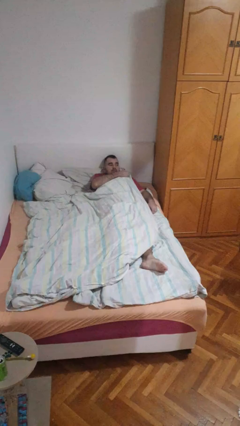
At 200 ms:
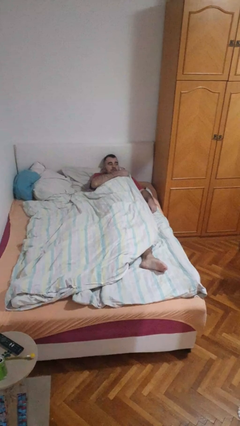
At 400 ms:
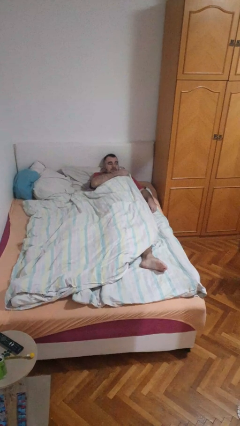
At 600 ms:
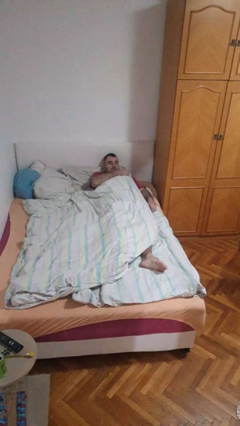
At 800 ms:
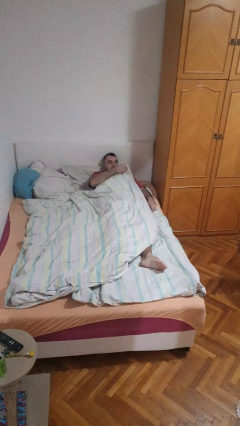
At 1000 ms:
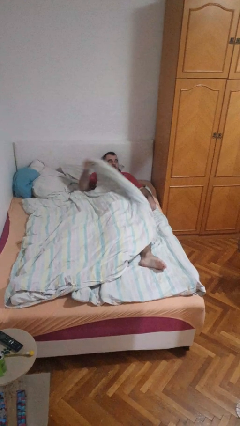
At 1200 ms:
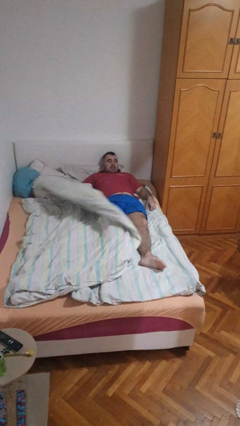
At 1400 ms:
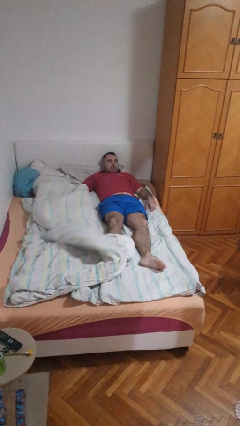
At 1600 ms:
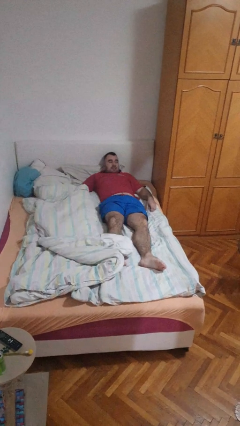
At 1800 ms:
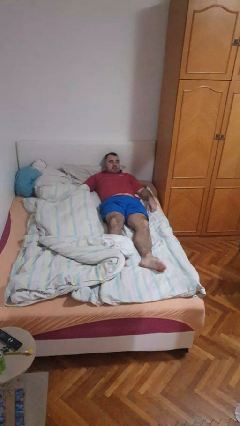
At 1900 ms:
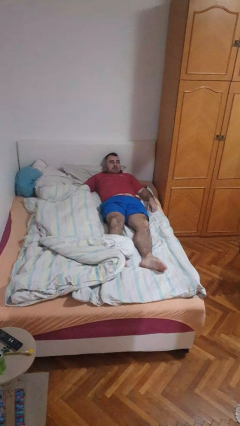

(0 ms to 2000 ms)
person uncovers with bedsheets

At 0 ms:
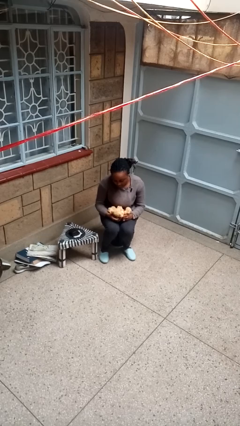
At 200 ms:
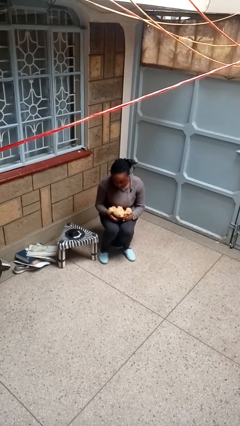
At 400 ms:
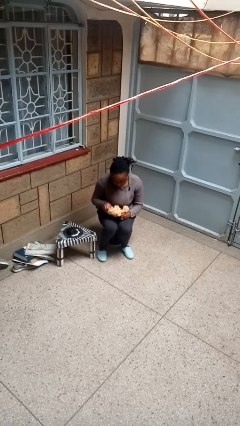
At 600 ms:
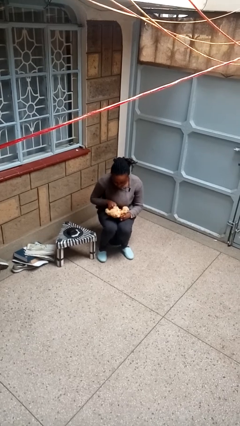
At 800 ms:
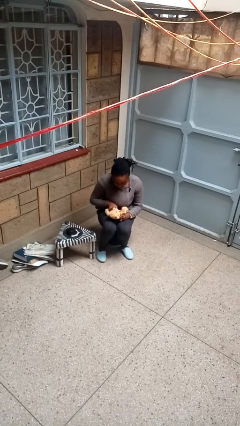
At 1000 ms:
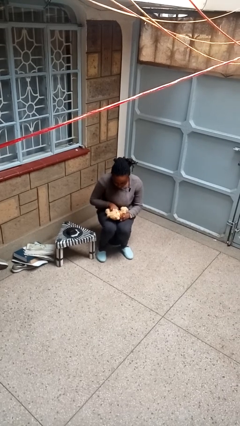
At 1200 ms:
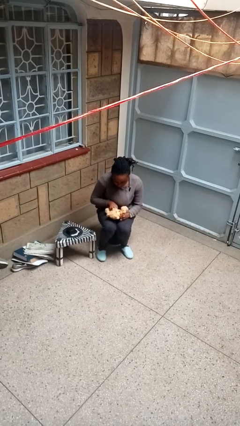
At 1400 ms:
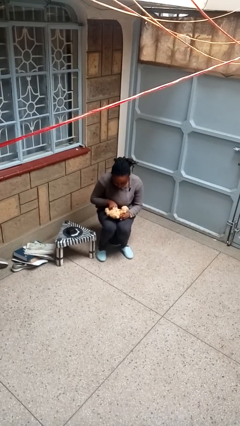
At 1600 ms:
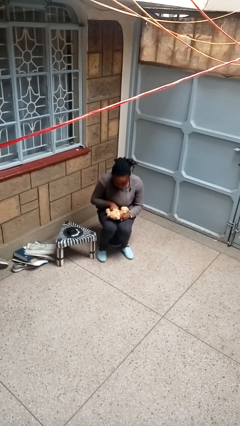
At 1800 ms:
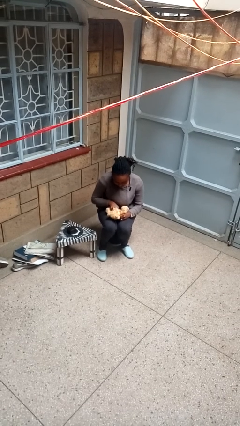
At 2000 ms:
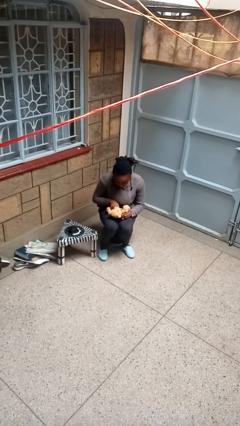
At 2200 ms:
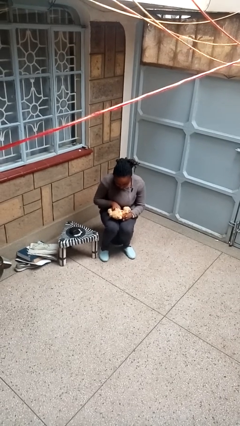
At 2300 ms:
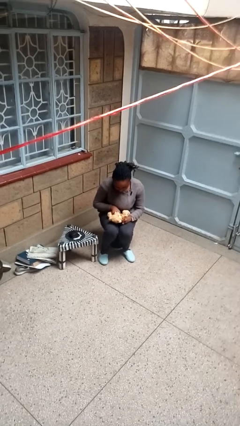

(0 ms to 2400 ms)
person squeezes object

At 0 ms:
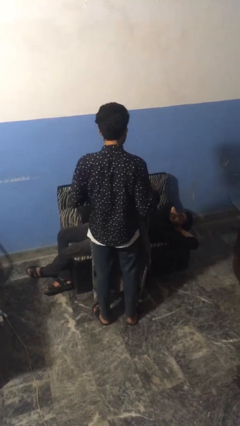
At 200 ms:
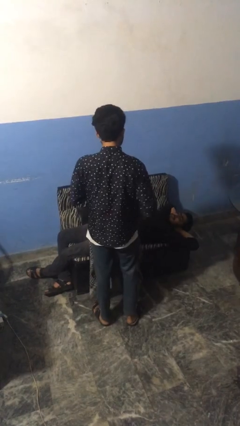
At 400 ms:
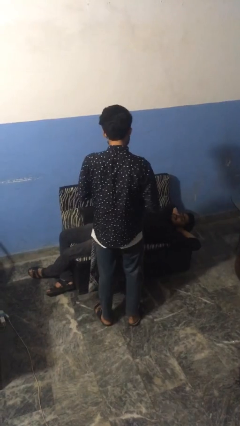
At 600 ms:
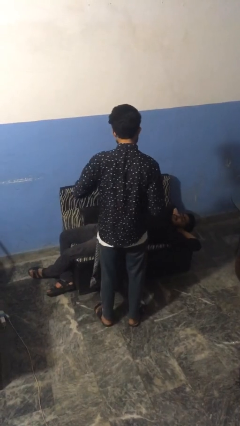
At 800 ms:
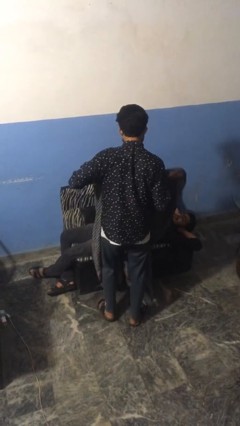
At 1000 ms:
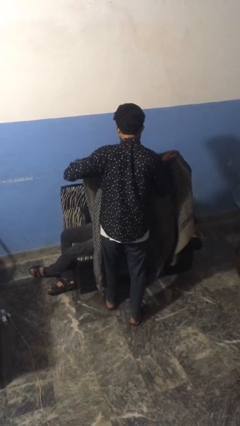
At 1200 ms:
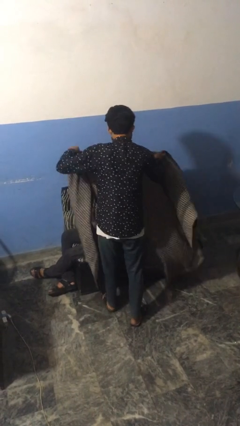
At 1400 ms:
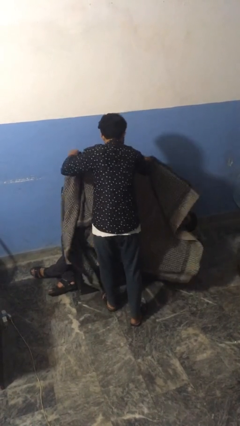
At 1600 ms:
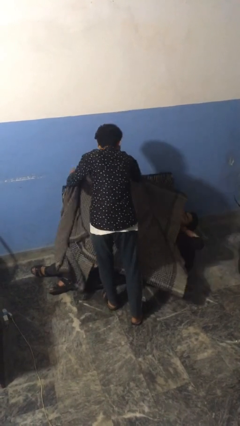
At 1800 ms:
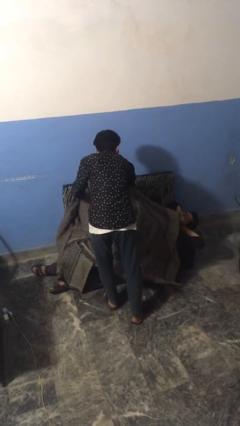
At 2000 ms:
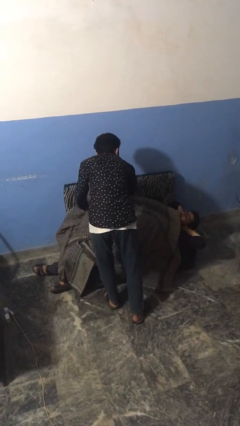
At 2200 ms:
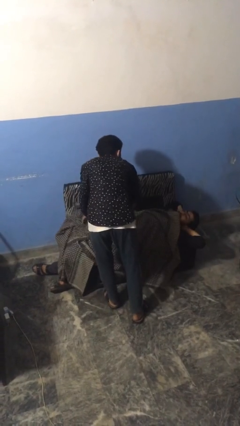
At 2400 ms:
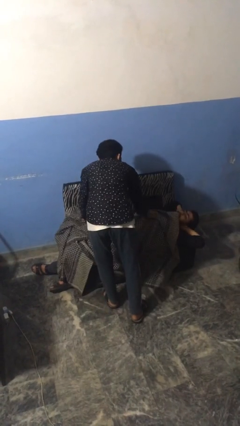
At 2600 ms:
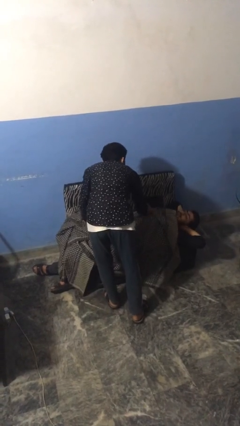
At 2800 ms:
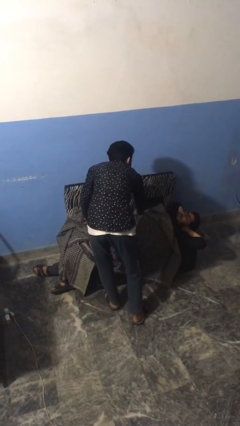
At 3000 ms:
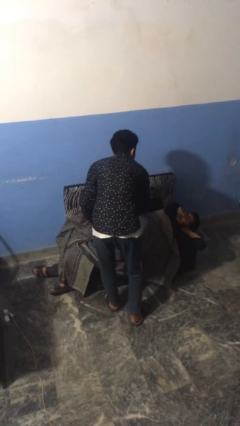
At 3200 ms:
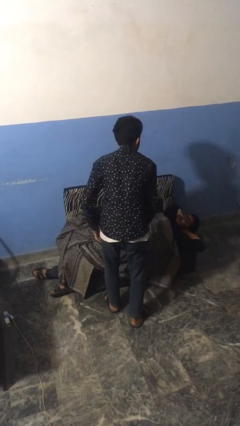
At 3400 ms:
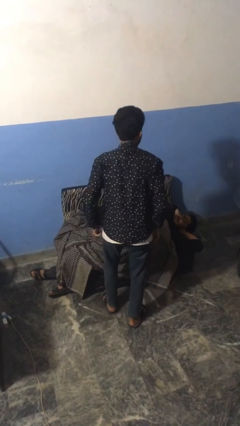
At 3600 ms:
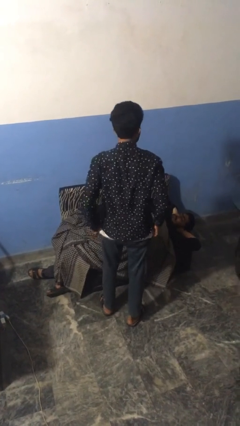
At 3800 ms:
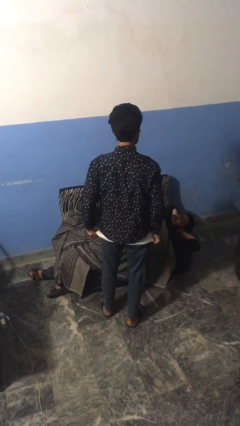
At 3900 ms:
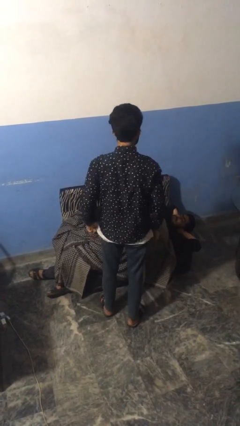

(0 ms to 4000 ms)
person covers friend with blanket

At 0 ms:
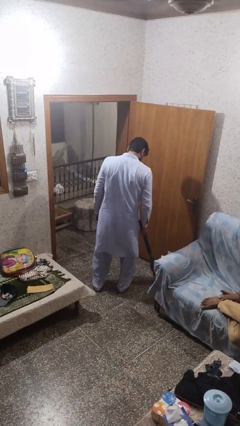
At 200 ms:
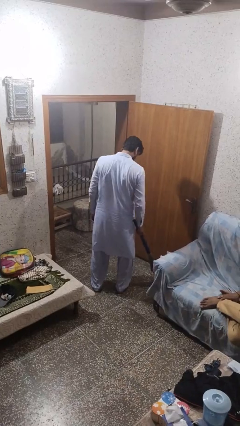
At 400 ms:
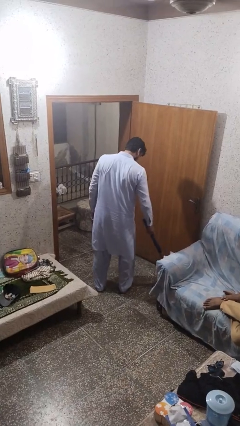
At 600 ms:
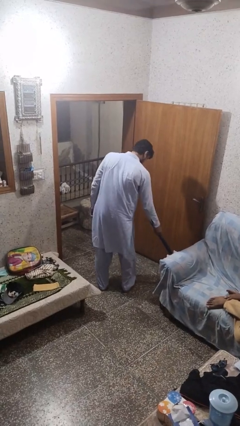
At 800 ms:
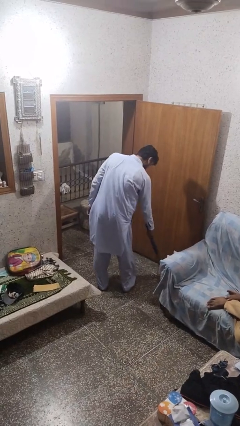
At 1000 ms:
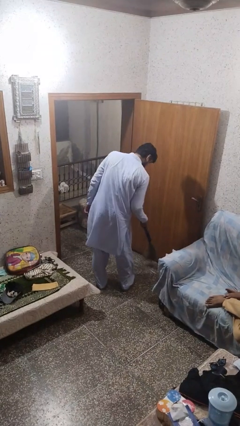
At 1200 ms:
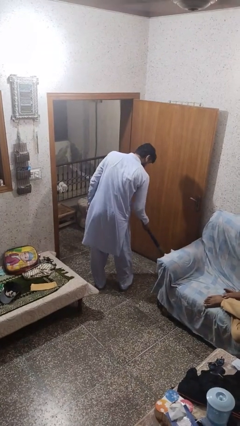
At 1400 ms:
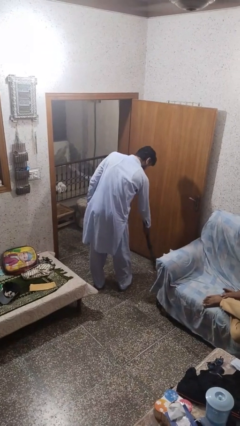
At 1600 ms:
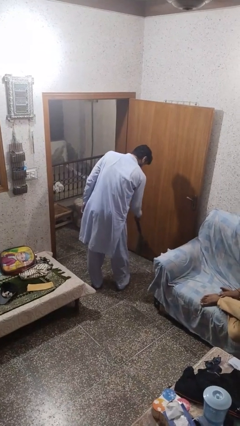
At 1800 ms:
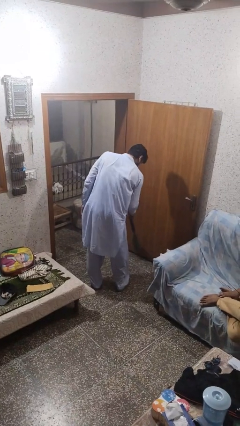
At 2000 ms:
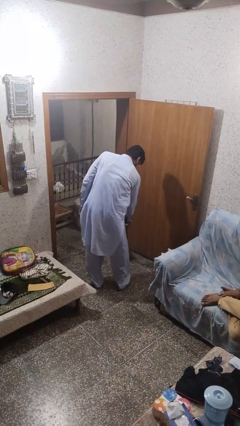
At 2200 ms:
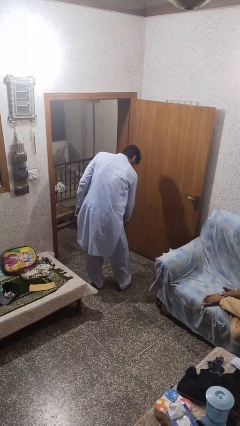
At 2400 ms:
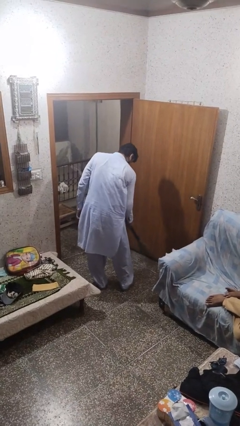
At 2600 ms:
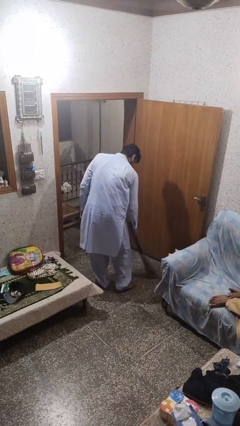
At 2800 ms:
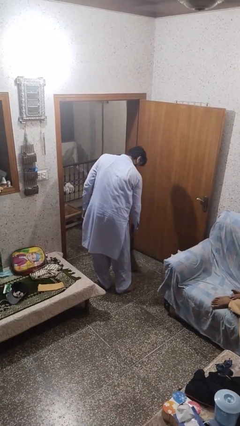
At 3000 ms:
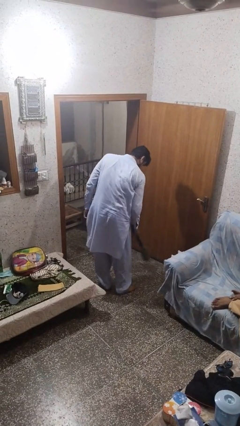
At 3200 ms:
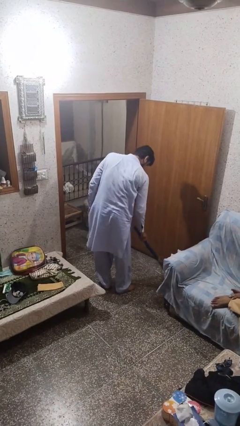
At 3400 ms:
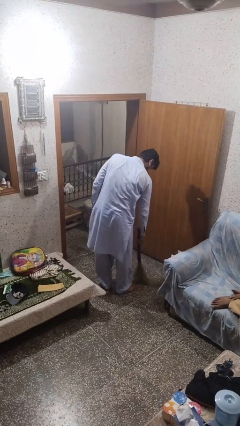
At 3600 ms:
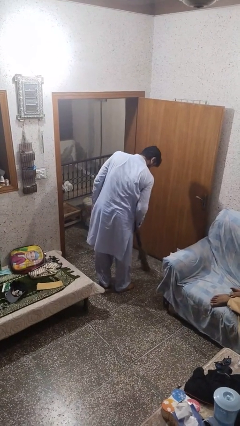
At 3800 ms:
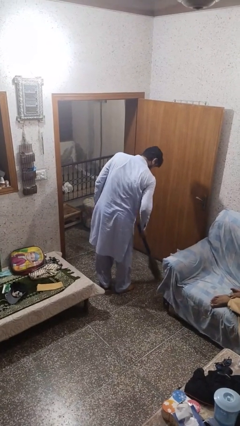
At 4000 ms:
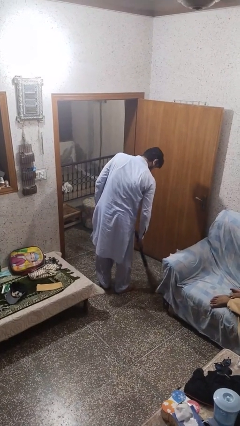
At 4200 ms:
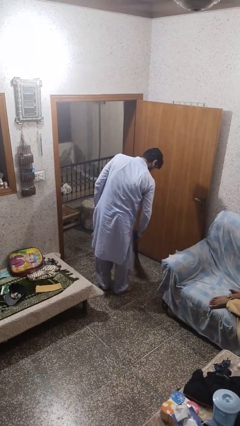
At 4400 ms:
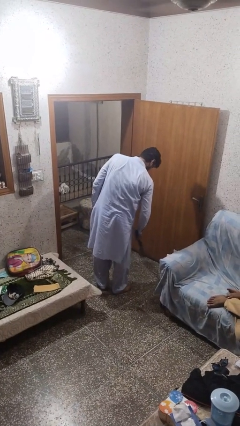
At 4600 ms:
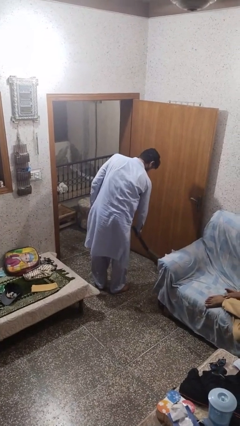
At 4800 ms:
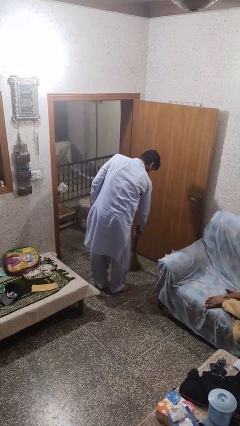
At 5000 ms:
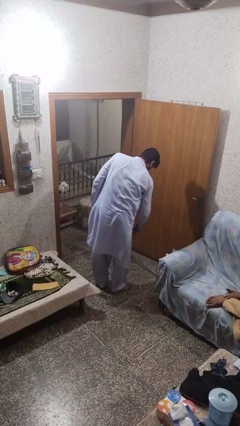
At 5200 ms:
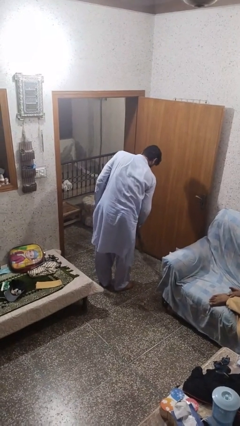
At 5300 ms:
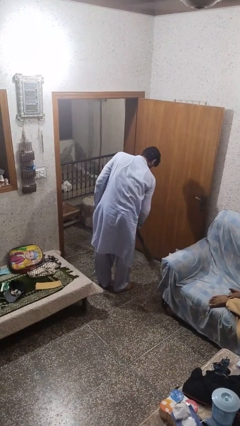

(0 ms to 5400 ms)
person sweeps floor

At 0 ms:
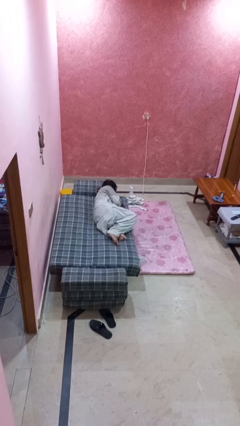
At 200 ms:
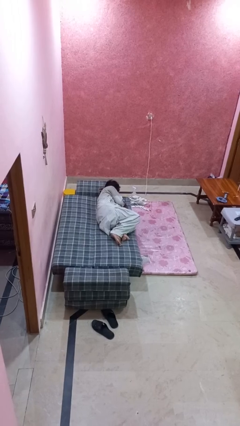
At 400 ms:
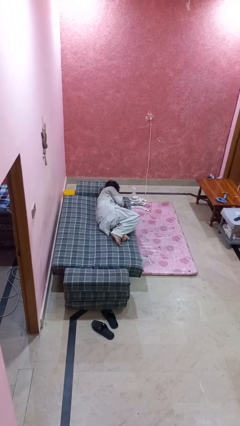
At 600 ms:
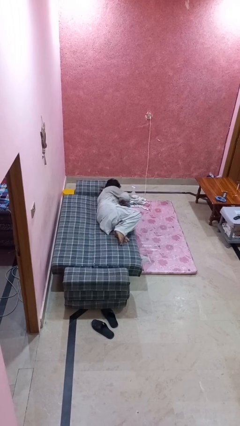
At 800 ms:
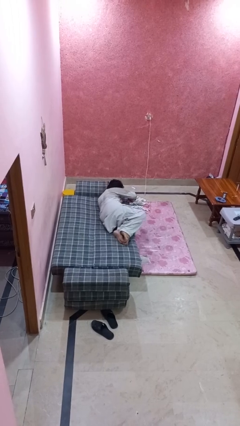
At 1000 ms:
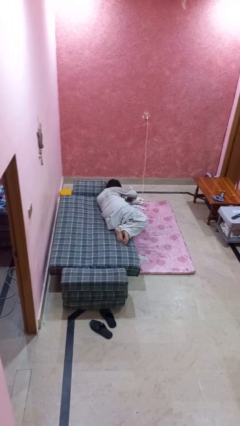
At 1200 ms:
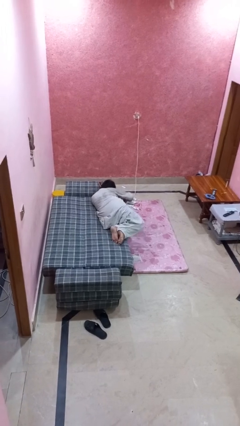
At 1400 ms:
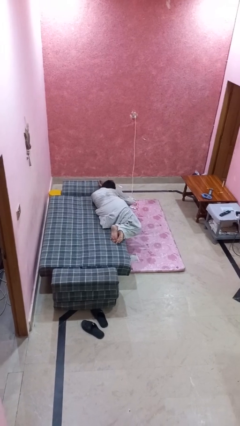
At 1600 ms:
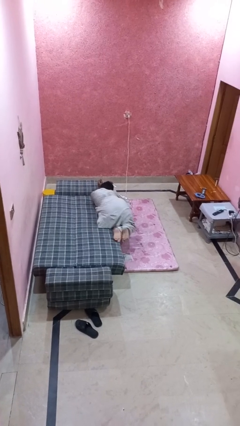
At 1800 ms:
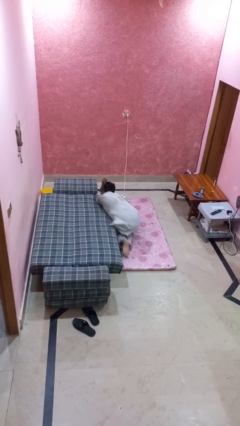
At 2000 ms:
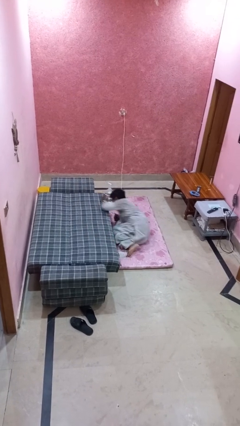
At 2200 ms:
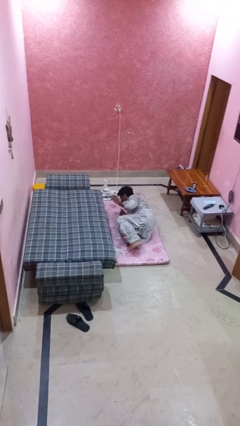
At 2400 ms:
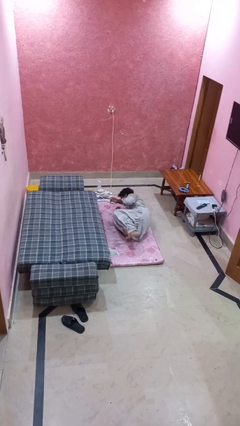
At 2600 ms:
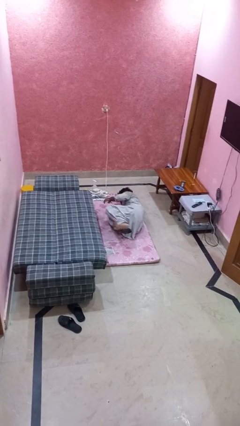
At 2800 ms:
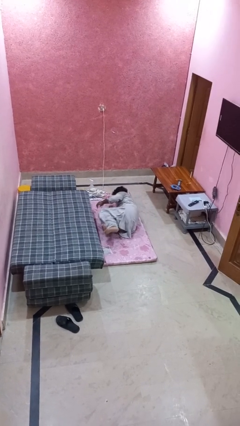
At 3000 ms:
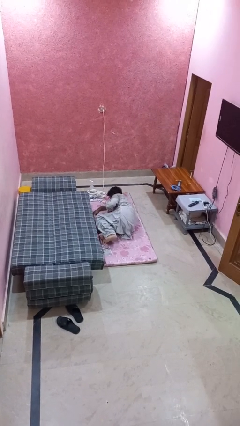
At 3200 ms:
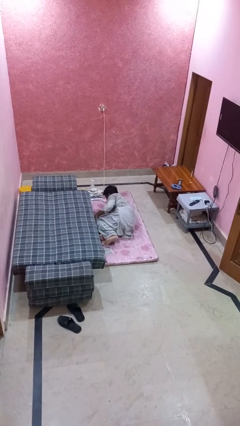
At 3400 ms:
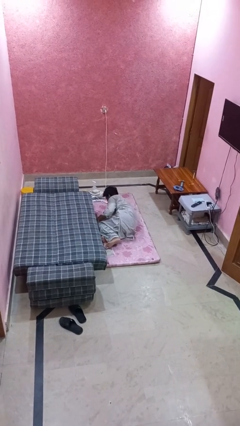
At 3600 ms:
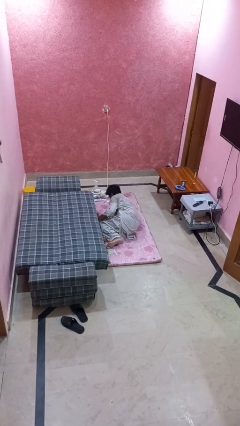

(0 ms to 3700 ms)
person falls from bed
